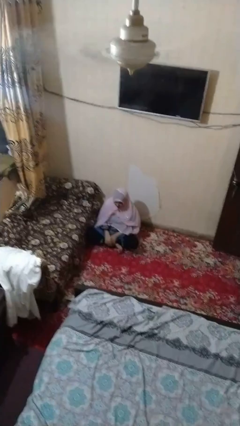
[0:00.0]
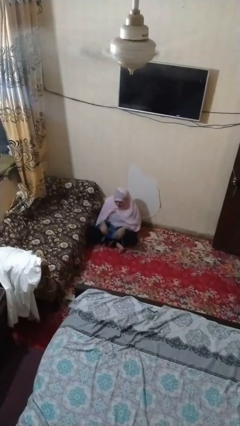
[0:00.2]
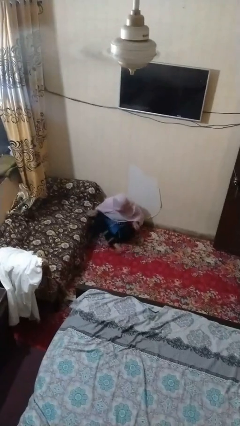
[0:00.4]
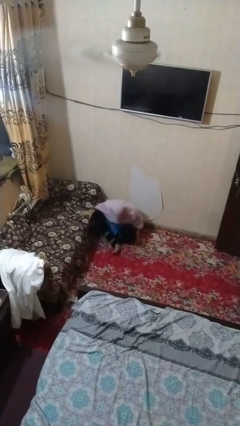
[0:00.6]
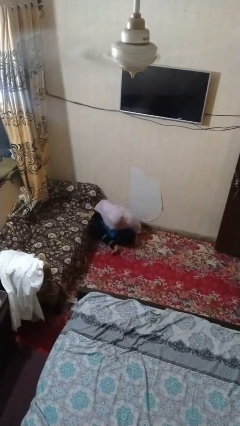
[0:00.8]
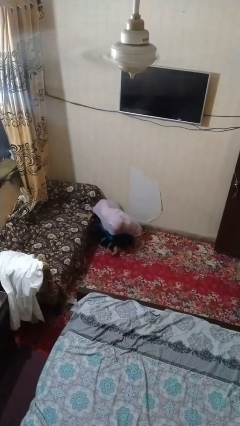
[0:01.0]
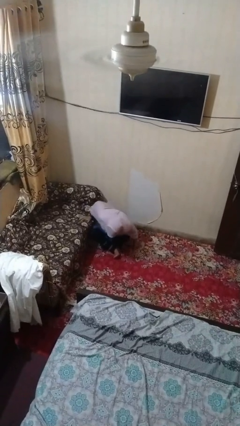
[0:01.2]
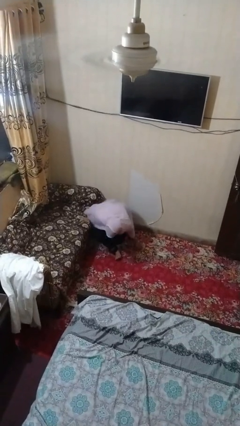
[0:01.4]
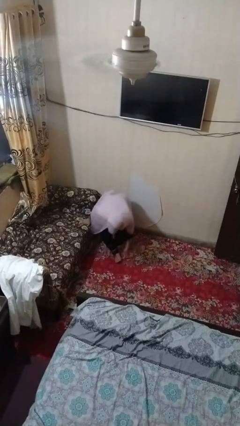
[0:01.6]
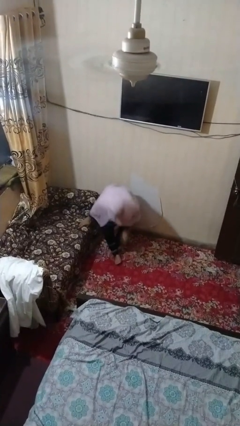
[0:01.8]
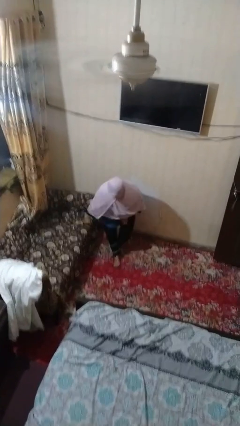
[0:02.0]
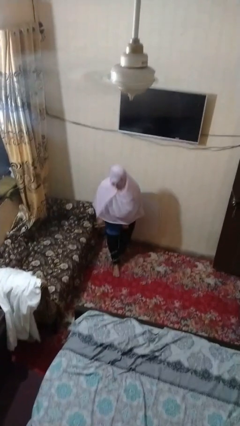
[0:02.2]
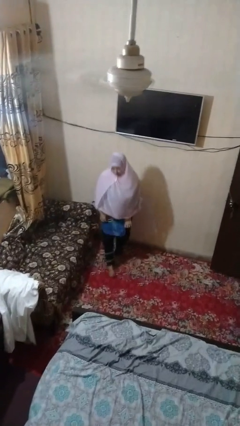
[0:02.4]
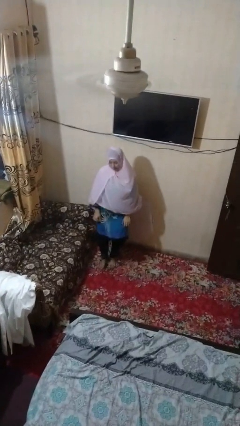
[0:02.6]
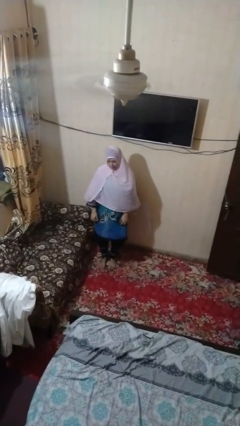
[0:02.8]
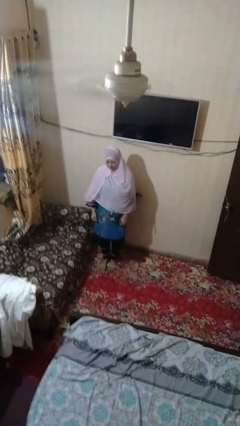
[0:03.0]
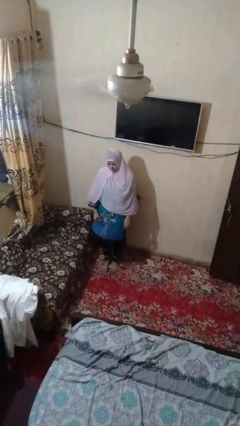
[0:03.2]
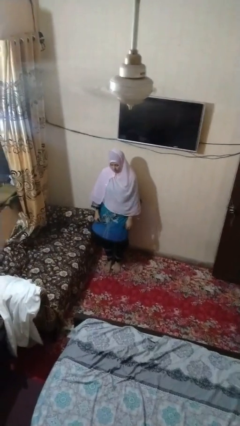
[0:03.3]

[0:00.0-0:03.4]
person stands up from floor

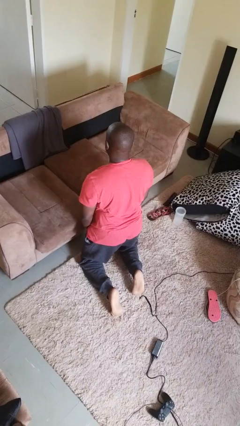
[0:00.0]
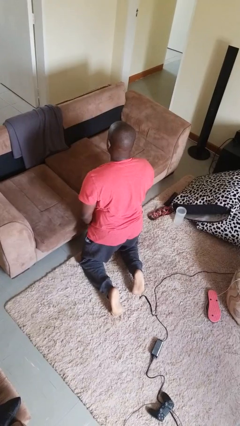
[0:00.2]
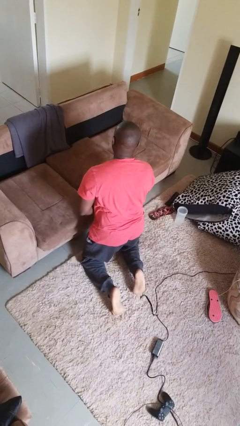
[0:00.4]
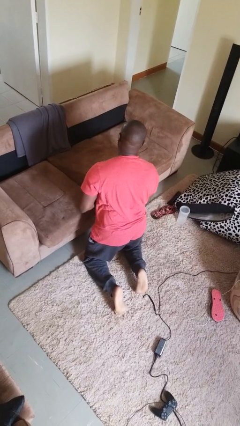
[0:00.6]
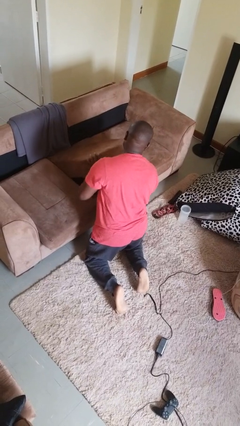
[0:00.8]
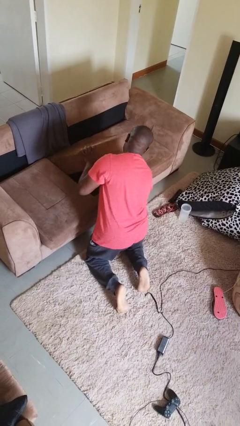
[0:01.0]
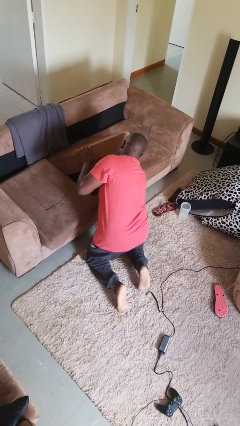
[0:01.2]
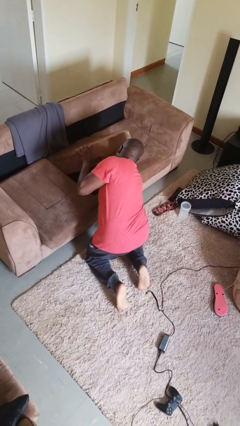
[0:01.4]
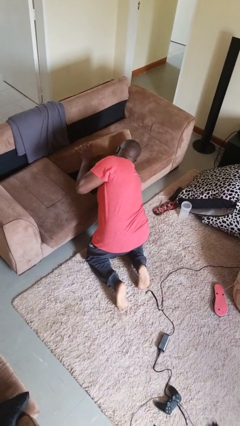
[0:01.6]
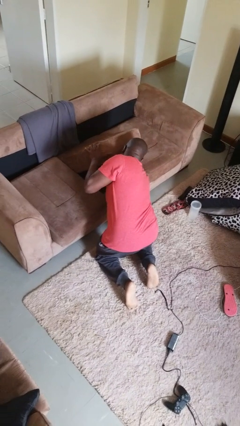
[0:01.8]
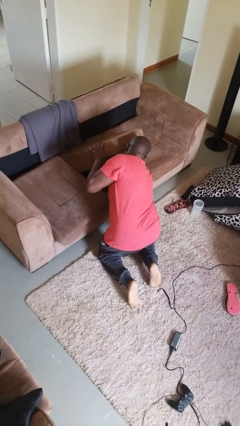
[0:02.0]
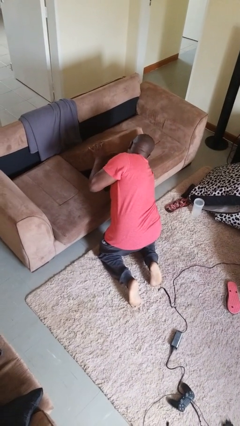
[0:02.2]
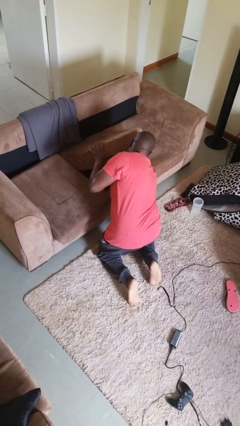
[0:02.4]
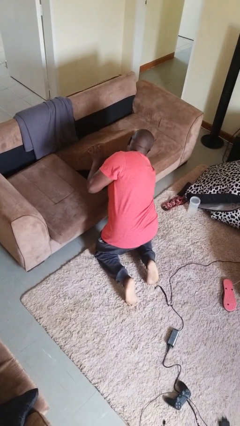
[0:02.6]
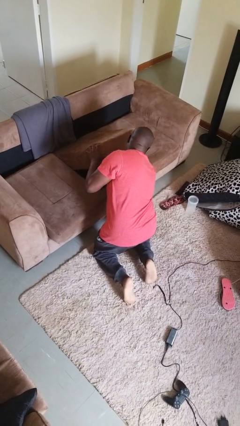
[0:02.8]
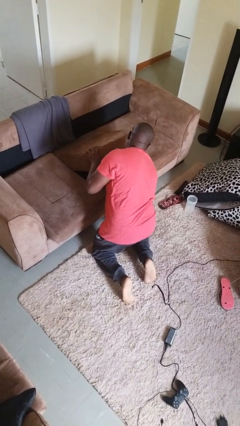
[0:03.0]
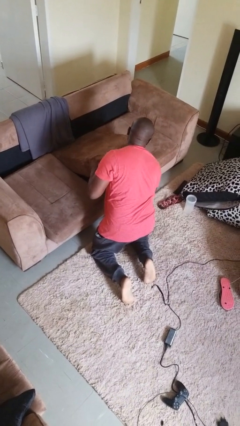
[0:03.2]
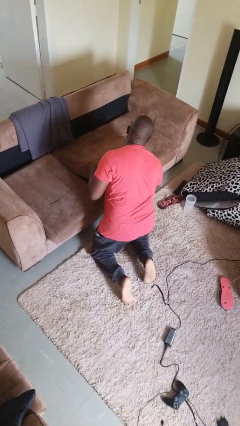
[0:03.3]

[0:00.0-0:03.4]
person searches under couch

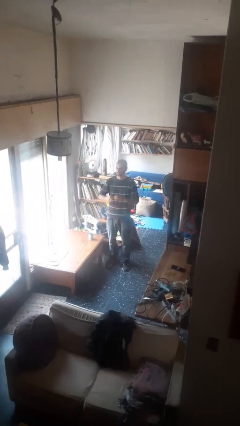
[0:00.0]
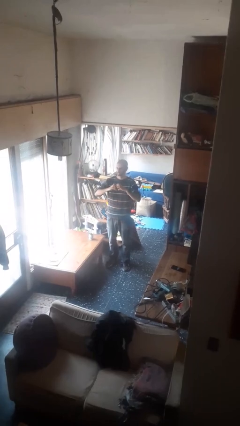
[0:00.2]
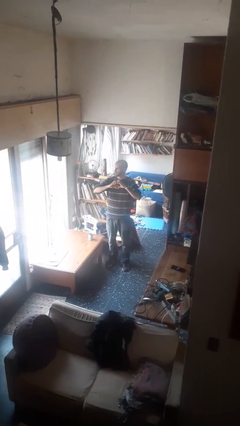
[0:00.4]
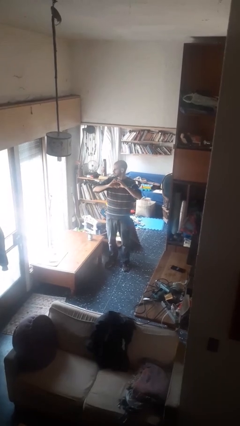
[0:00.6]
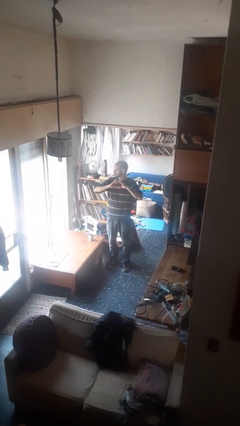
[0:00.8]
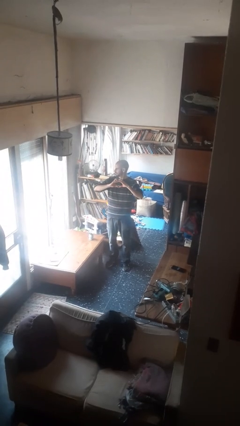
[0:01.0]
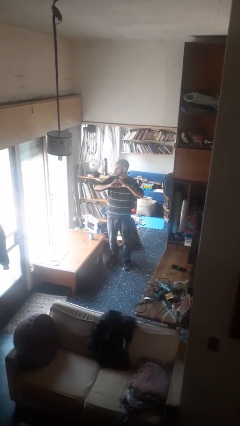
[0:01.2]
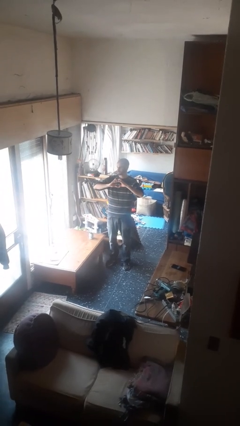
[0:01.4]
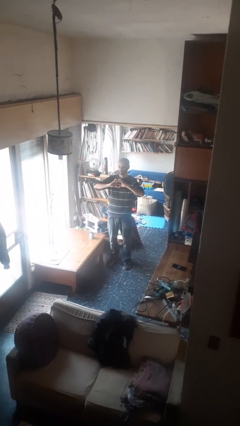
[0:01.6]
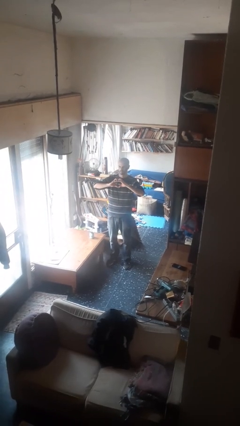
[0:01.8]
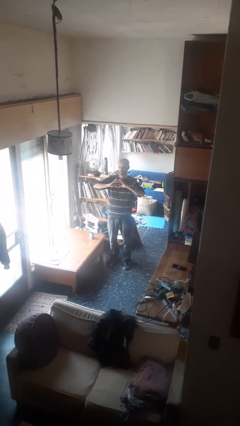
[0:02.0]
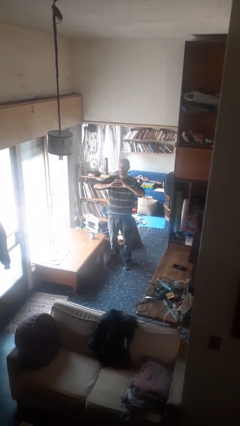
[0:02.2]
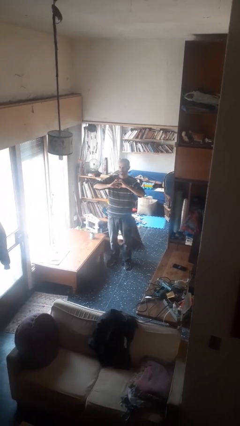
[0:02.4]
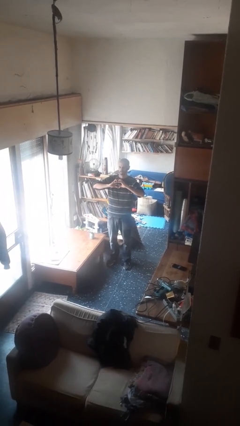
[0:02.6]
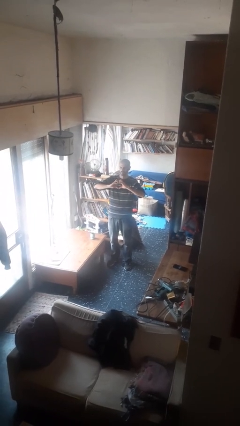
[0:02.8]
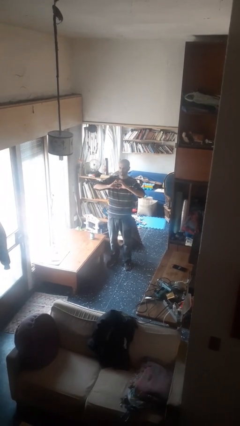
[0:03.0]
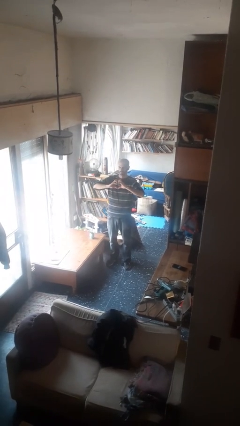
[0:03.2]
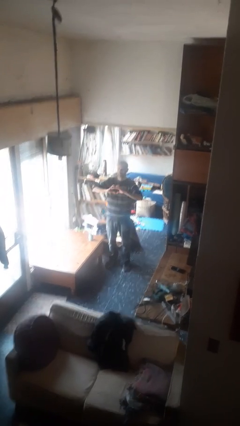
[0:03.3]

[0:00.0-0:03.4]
person gestures heart

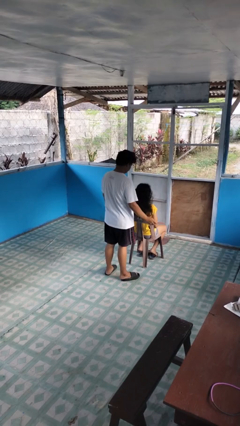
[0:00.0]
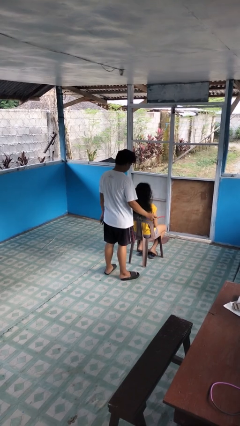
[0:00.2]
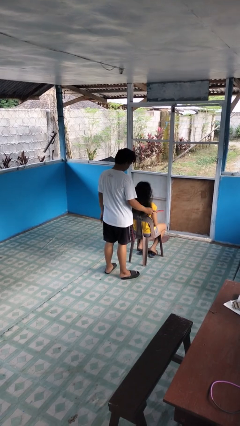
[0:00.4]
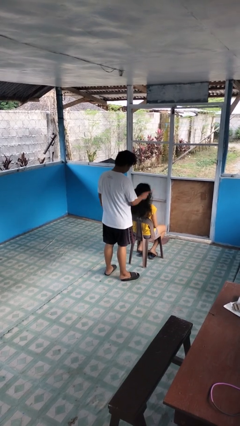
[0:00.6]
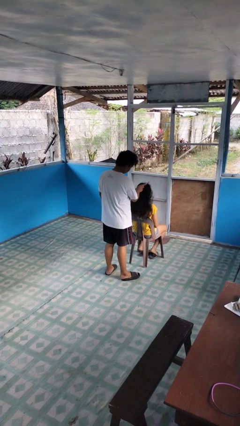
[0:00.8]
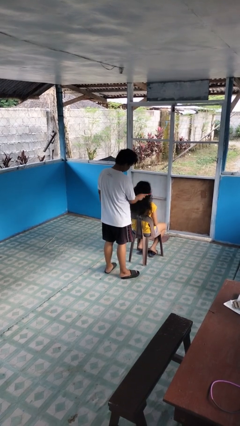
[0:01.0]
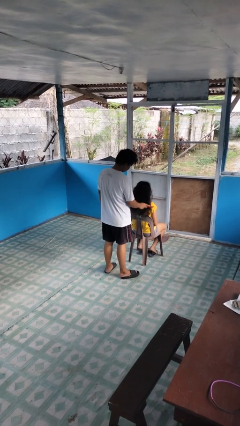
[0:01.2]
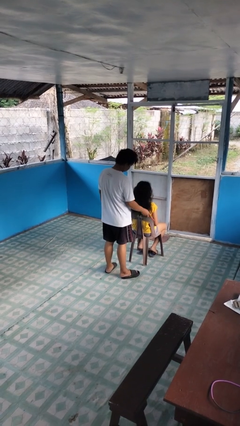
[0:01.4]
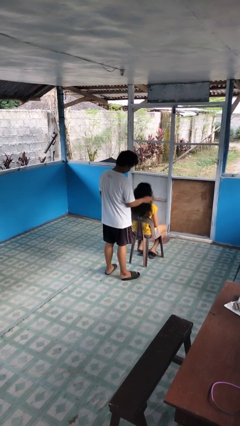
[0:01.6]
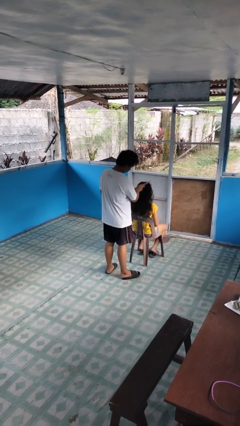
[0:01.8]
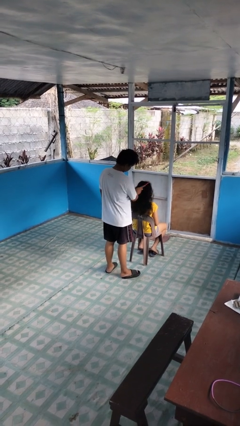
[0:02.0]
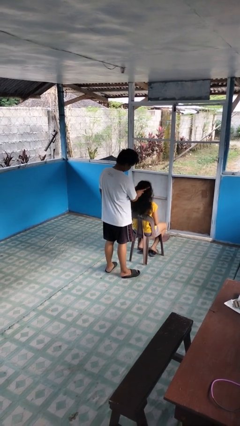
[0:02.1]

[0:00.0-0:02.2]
person brushes hair of person

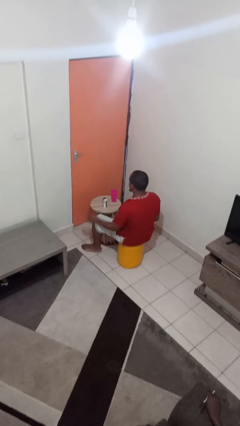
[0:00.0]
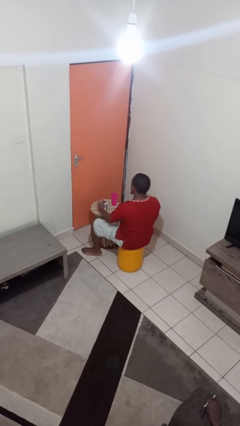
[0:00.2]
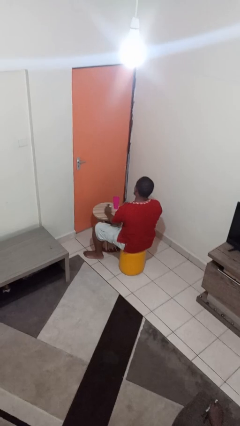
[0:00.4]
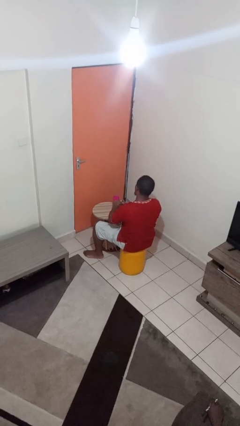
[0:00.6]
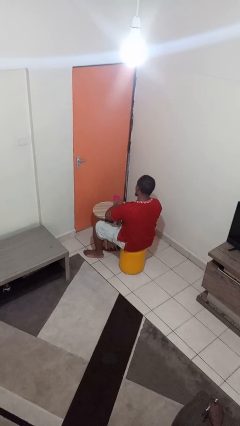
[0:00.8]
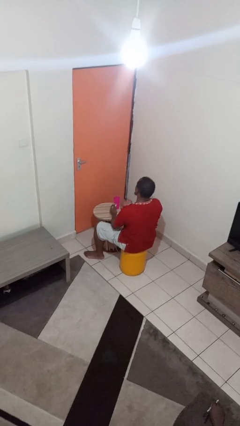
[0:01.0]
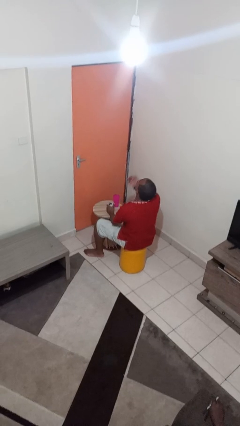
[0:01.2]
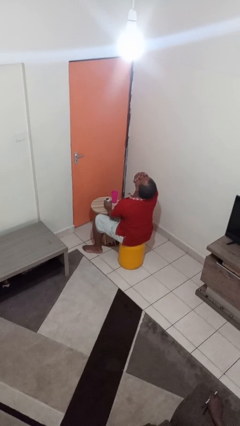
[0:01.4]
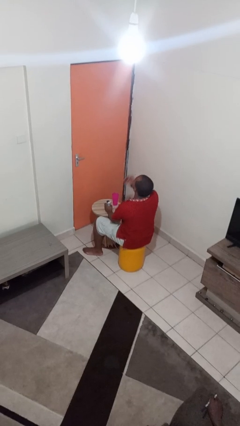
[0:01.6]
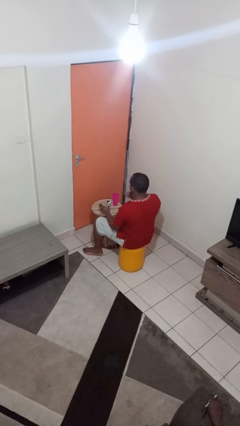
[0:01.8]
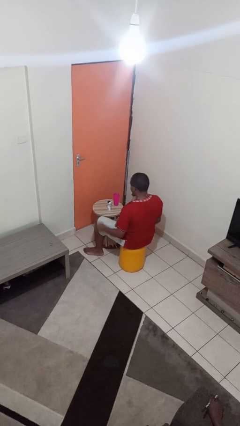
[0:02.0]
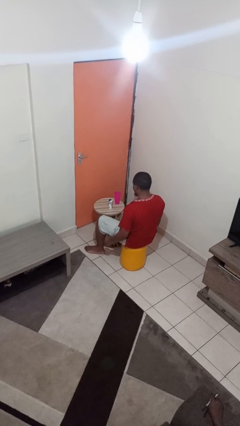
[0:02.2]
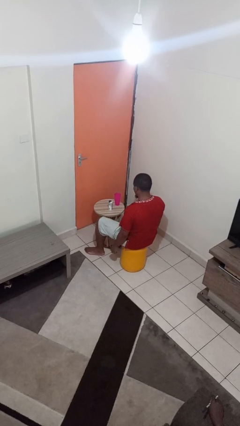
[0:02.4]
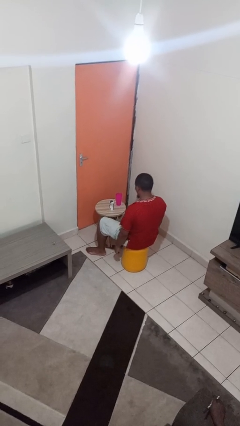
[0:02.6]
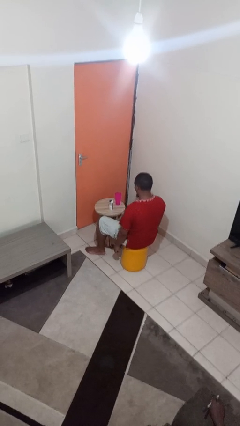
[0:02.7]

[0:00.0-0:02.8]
person takes medicine pills

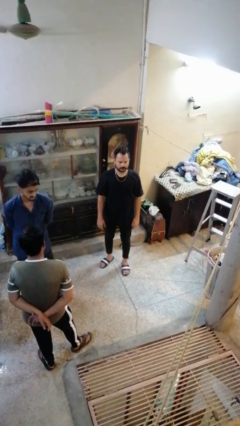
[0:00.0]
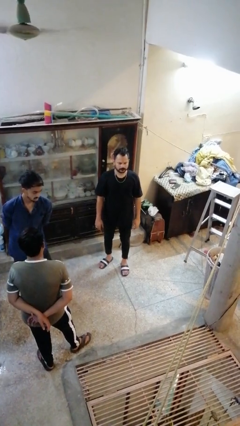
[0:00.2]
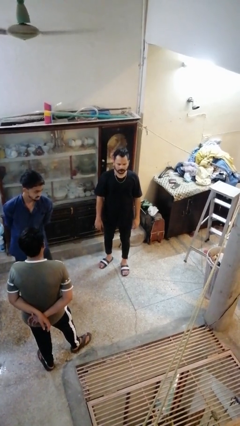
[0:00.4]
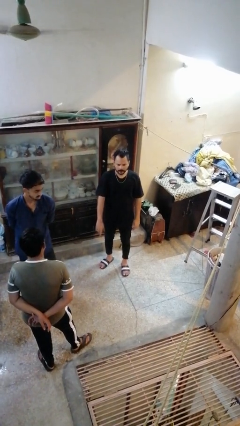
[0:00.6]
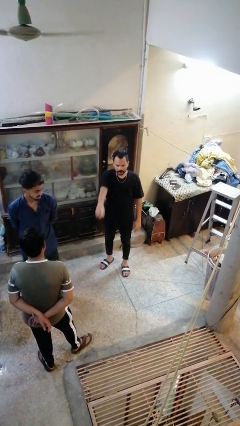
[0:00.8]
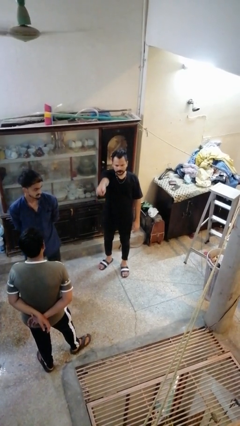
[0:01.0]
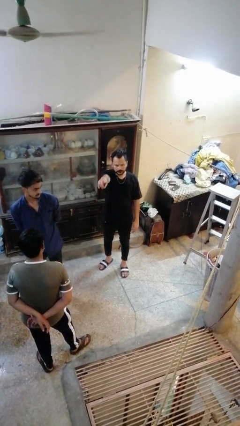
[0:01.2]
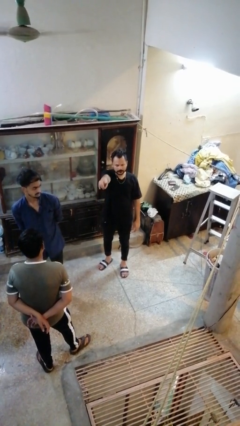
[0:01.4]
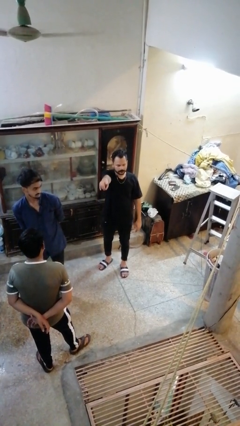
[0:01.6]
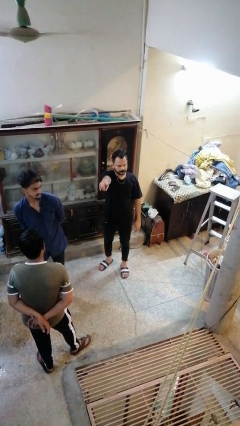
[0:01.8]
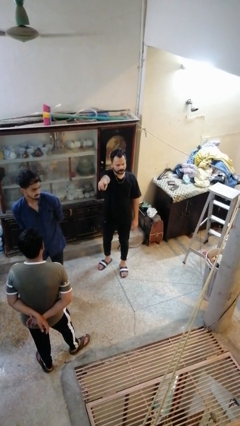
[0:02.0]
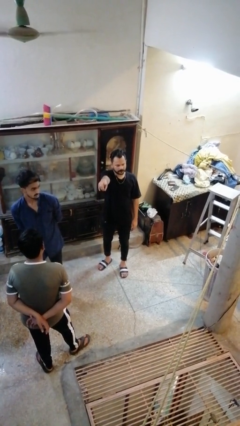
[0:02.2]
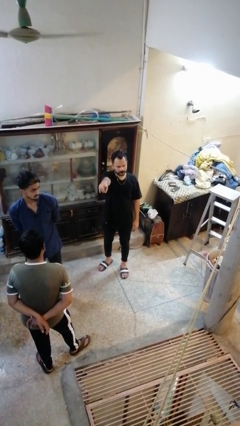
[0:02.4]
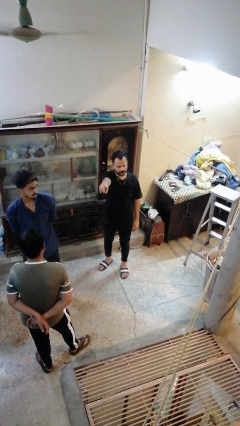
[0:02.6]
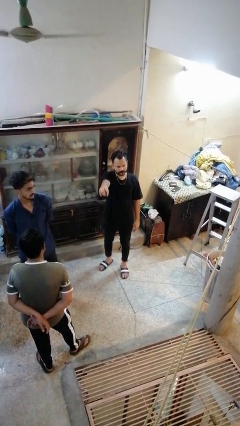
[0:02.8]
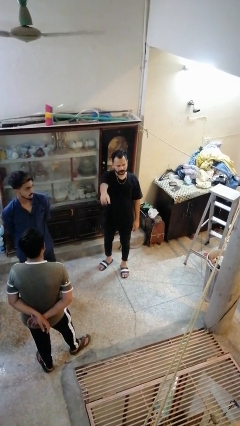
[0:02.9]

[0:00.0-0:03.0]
person points at person
